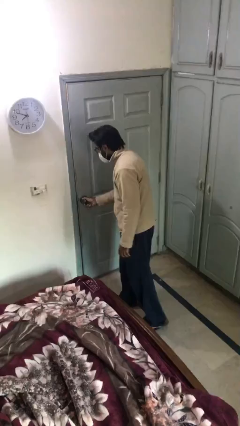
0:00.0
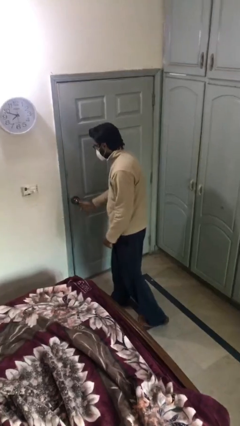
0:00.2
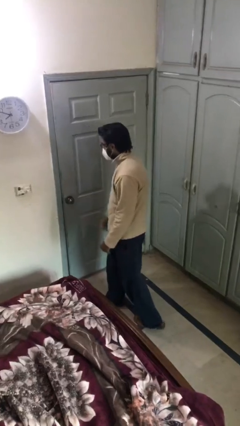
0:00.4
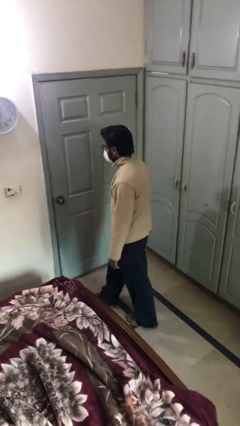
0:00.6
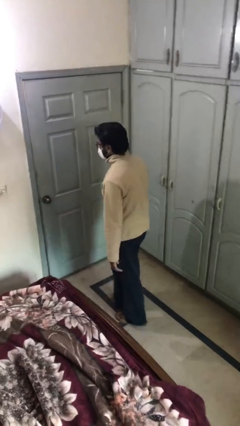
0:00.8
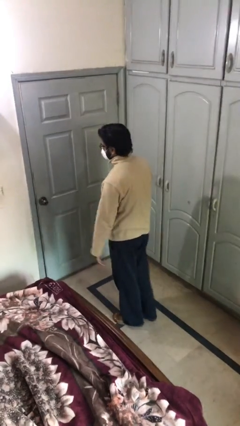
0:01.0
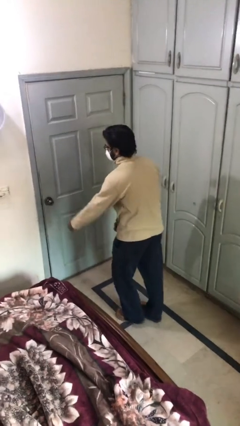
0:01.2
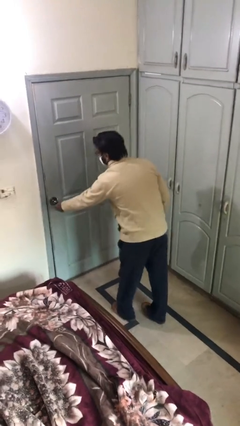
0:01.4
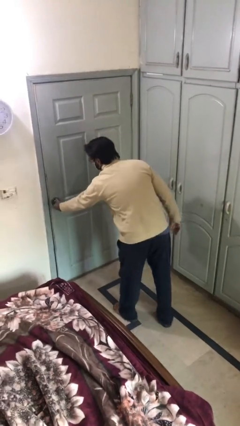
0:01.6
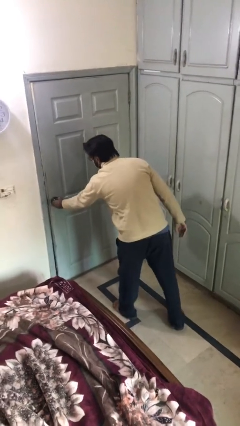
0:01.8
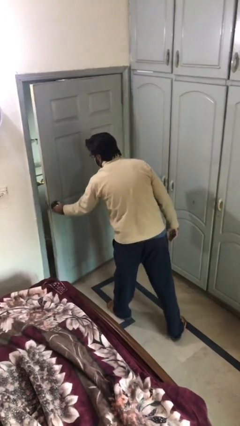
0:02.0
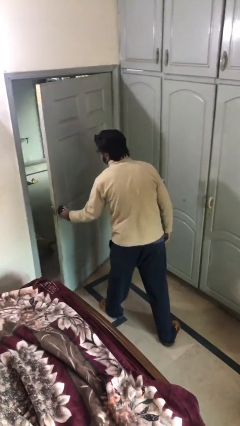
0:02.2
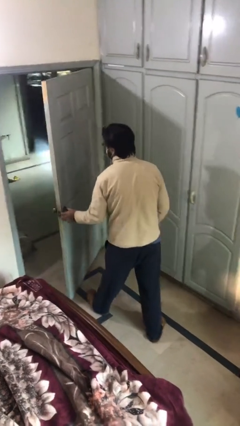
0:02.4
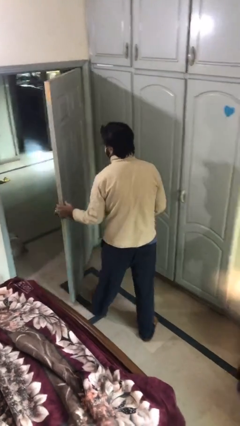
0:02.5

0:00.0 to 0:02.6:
person opens facility door

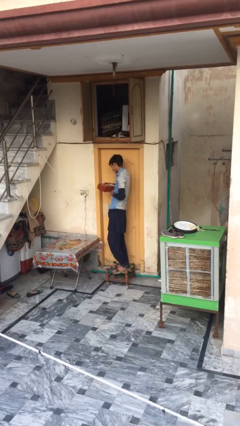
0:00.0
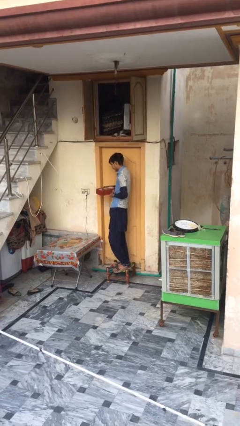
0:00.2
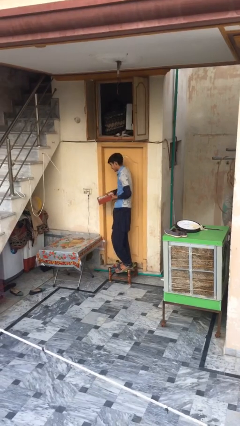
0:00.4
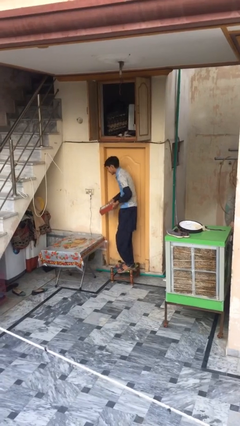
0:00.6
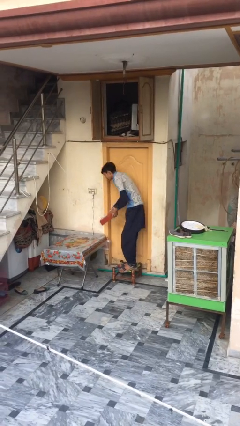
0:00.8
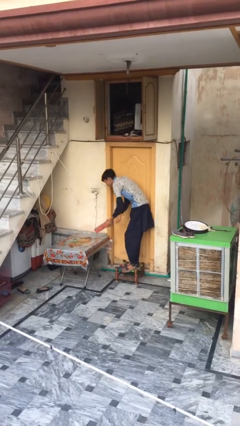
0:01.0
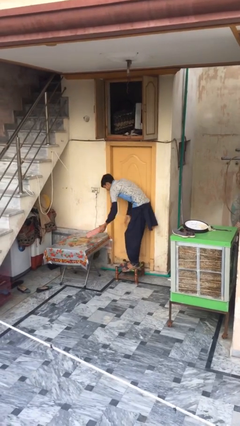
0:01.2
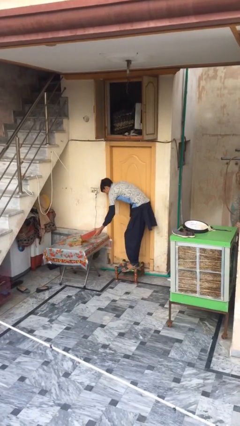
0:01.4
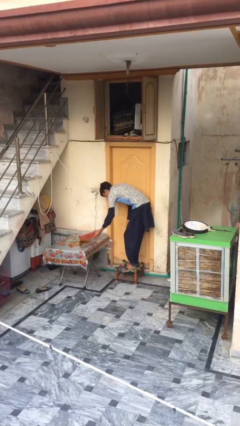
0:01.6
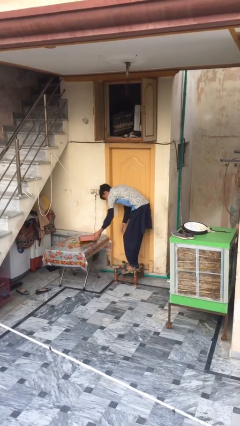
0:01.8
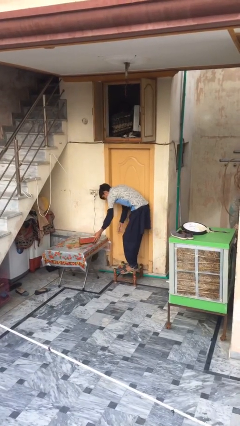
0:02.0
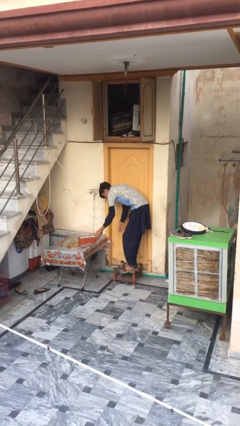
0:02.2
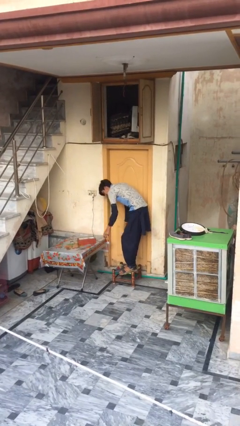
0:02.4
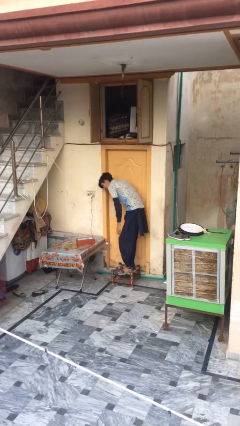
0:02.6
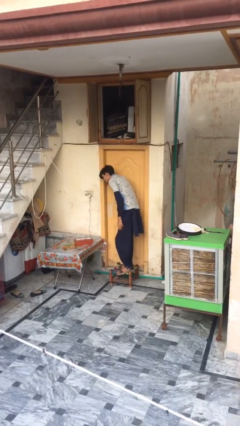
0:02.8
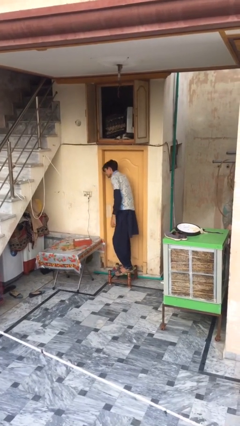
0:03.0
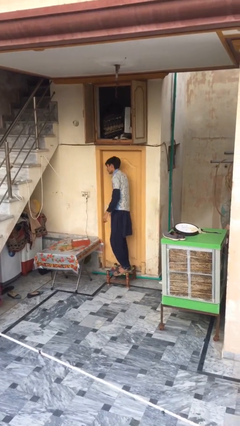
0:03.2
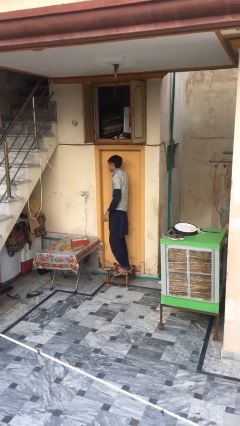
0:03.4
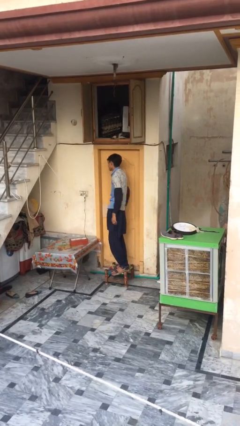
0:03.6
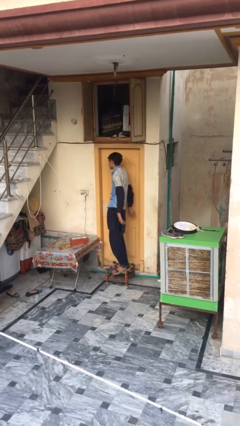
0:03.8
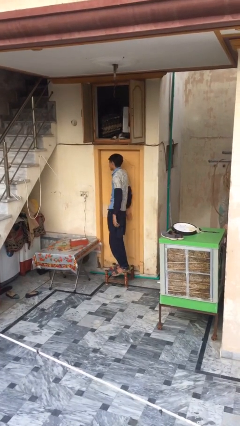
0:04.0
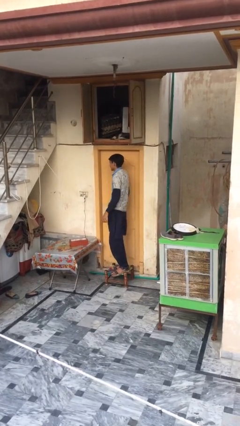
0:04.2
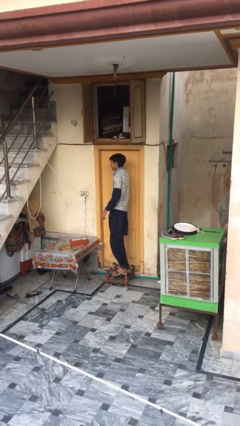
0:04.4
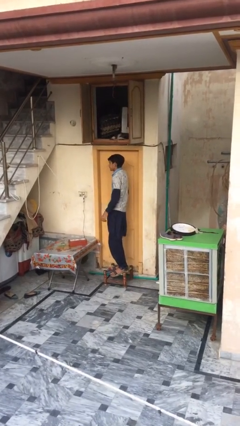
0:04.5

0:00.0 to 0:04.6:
person puts down object on table

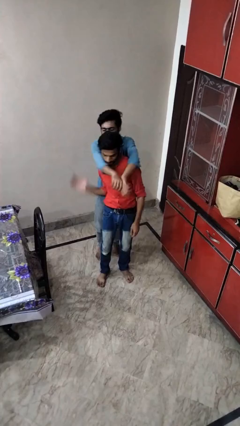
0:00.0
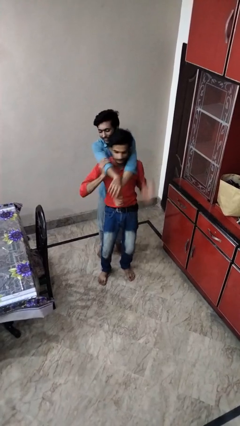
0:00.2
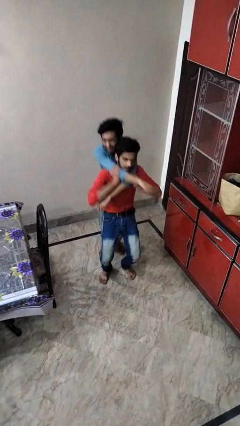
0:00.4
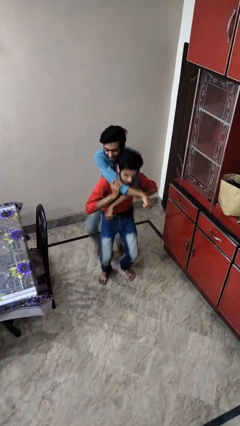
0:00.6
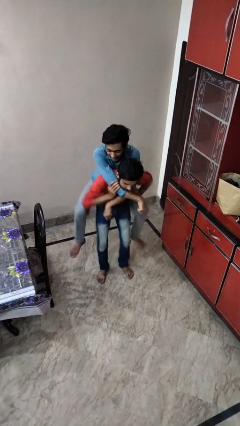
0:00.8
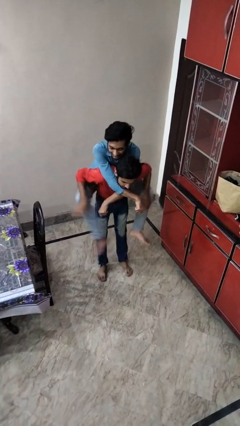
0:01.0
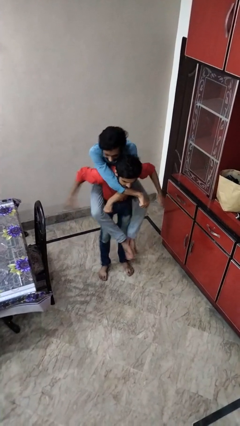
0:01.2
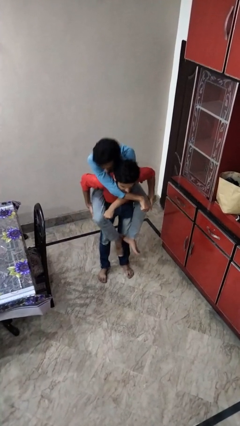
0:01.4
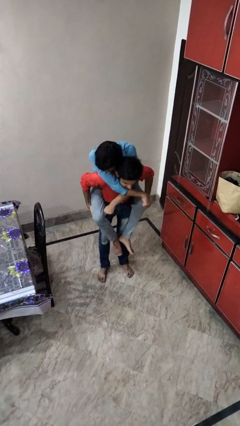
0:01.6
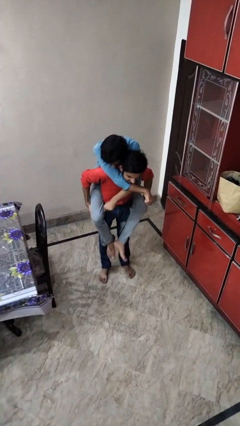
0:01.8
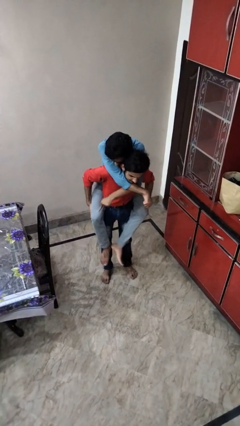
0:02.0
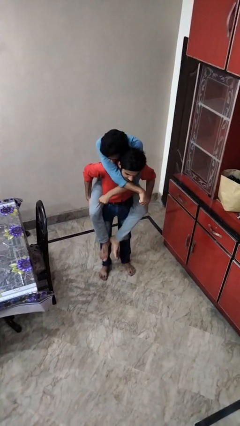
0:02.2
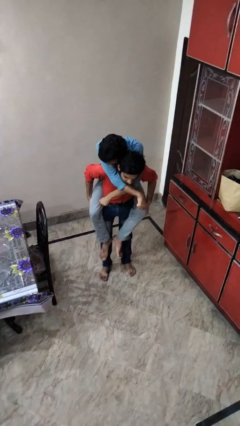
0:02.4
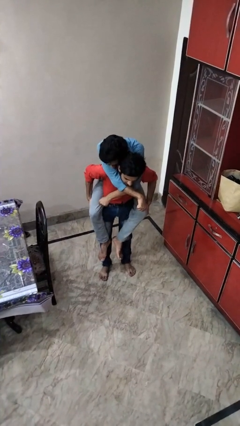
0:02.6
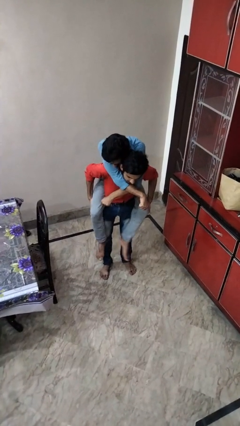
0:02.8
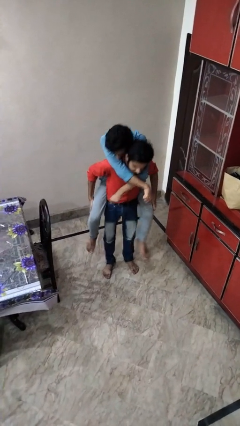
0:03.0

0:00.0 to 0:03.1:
person carries person over shoulder

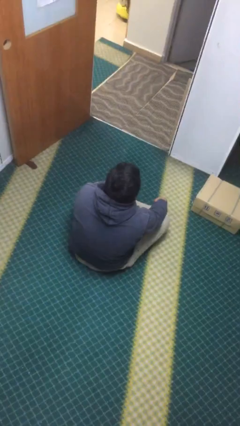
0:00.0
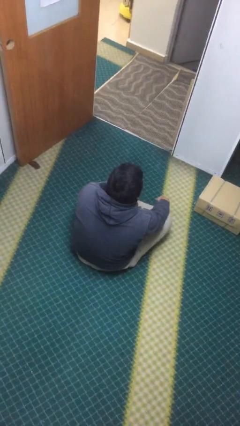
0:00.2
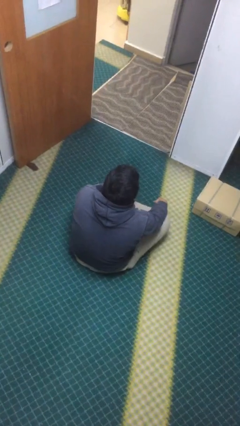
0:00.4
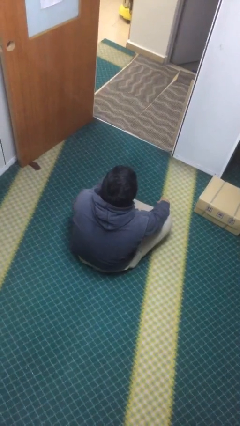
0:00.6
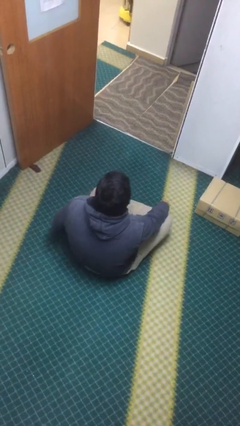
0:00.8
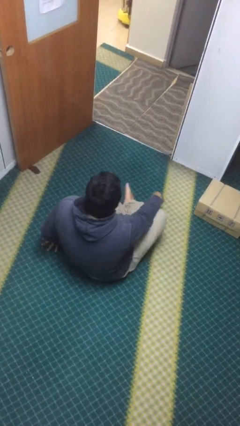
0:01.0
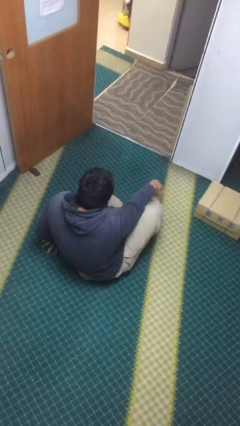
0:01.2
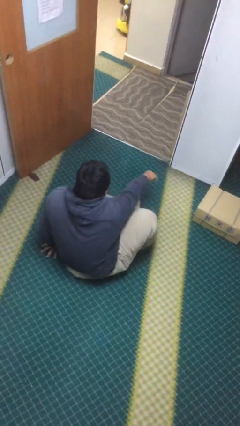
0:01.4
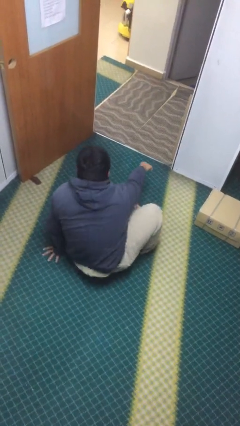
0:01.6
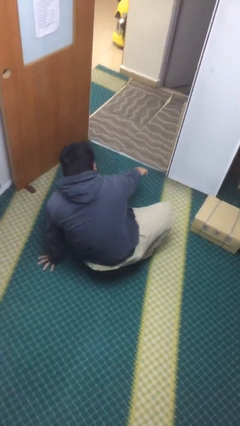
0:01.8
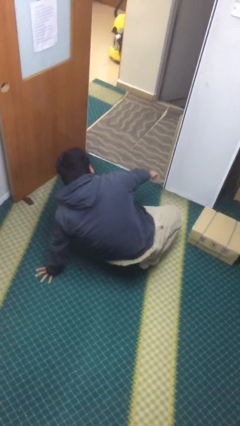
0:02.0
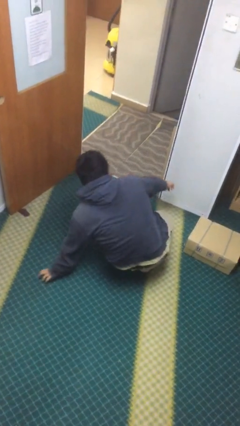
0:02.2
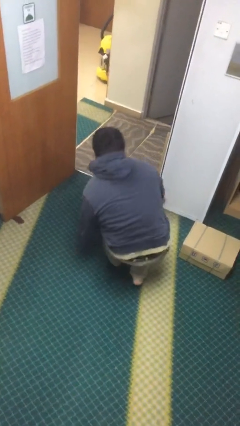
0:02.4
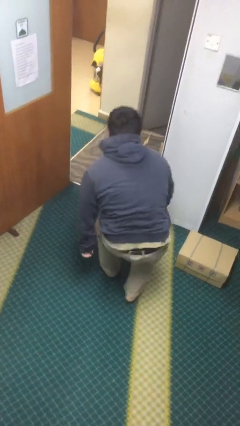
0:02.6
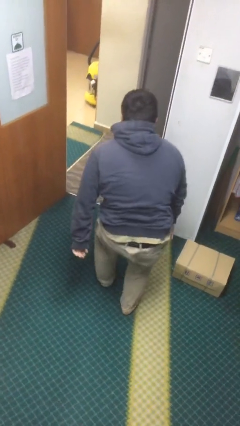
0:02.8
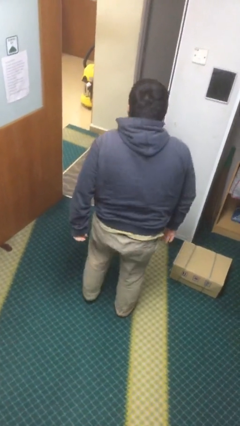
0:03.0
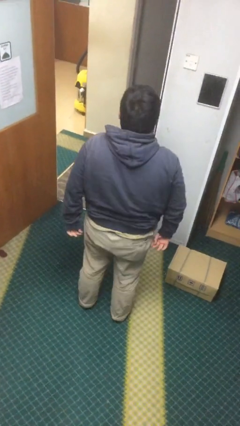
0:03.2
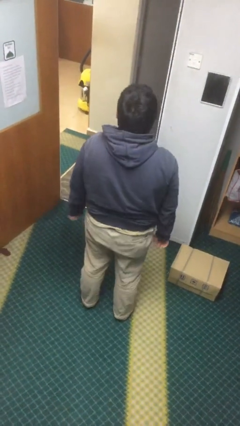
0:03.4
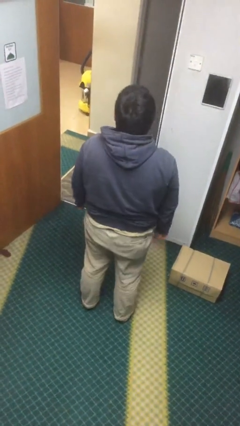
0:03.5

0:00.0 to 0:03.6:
person stands up from floor

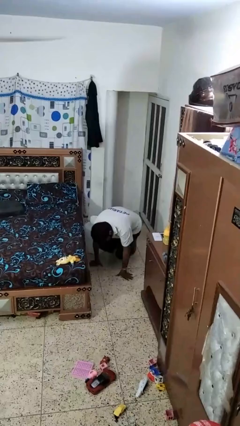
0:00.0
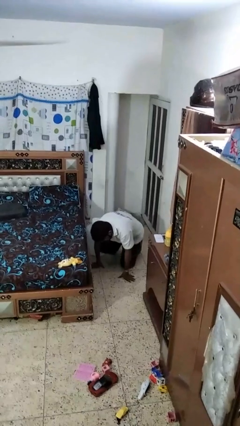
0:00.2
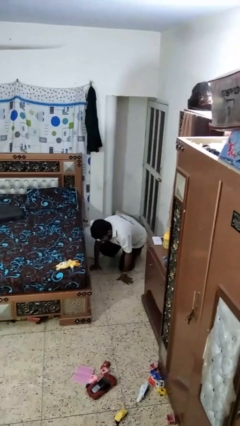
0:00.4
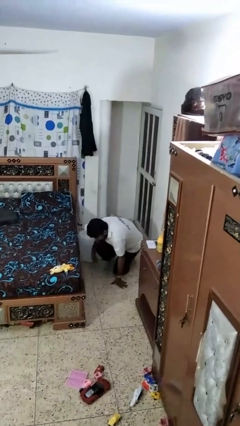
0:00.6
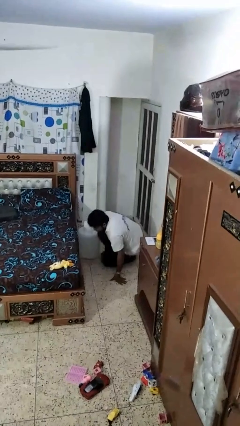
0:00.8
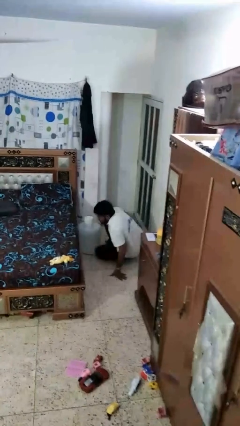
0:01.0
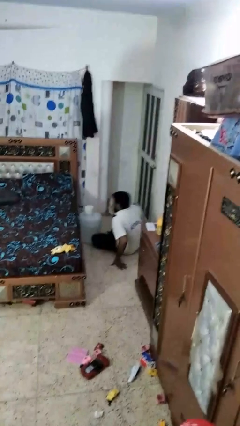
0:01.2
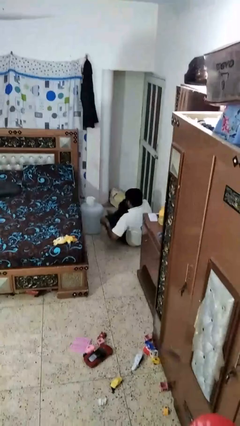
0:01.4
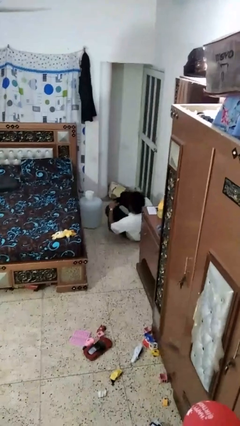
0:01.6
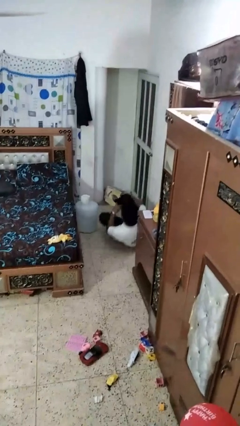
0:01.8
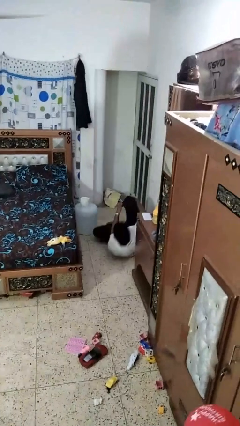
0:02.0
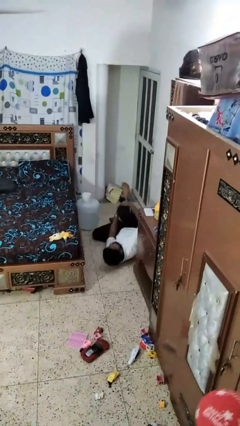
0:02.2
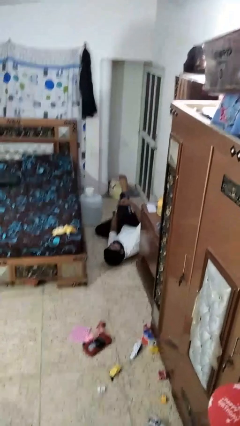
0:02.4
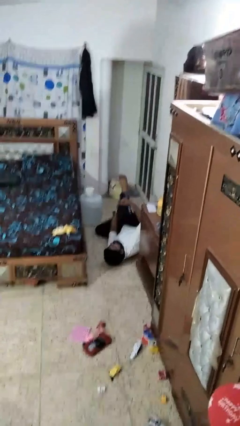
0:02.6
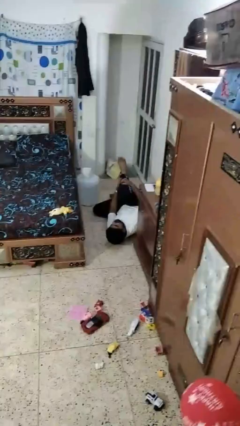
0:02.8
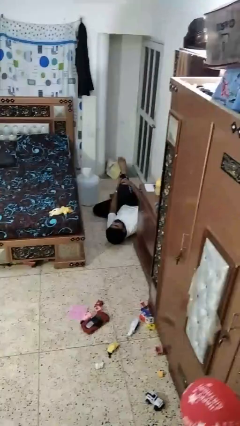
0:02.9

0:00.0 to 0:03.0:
person lies down on floor

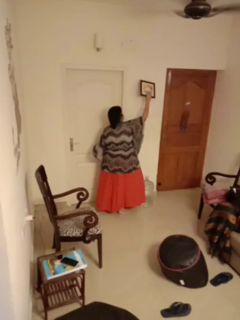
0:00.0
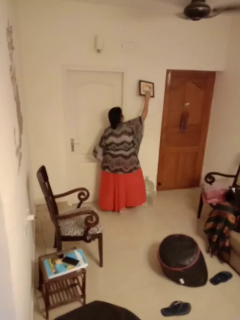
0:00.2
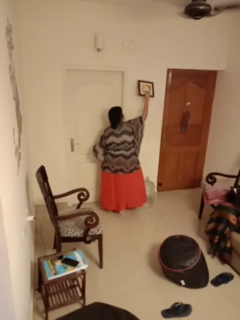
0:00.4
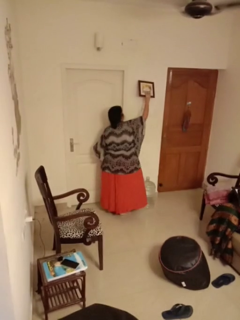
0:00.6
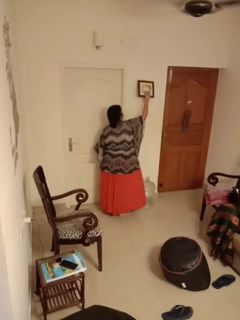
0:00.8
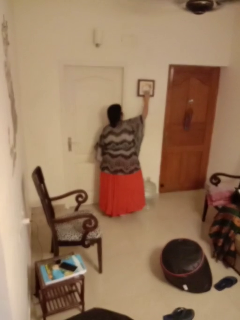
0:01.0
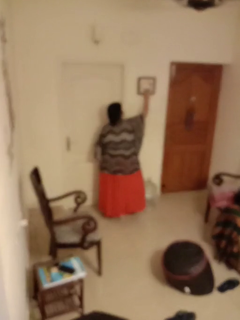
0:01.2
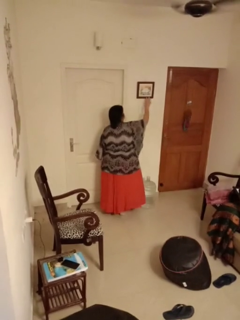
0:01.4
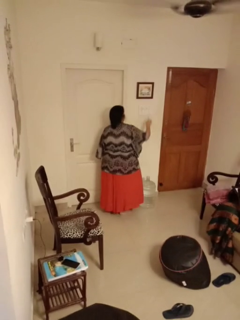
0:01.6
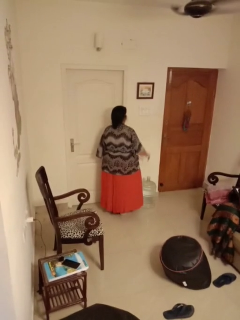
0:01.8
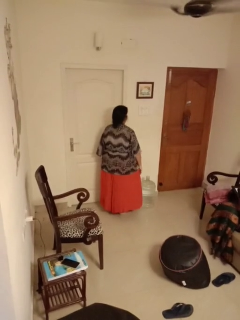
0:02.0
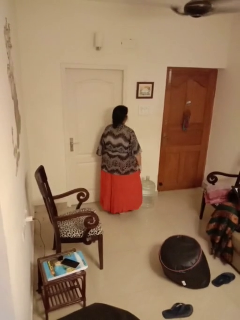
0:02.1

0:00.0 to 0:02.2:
person puts up picture frame
